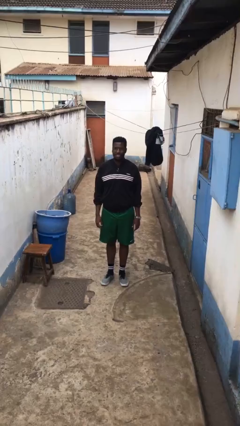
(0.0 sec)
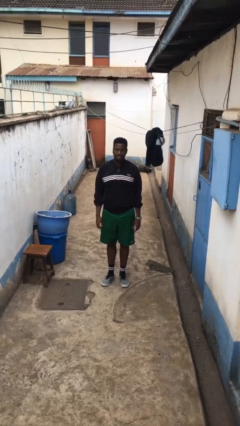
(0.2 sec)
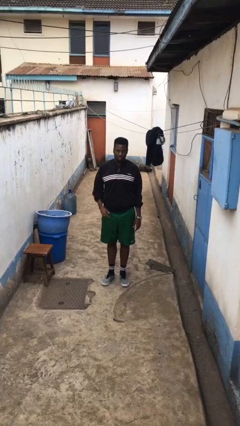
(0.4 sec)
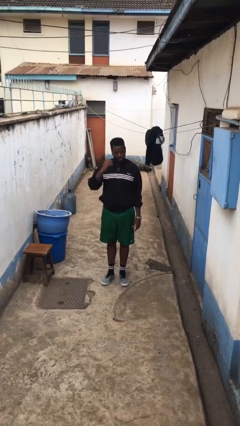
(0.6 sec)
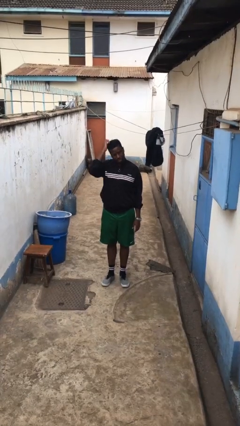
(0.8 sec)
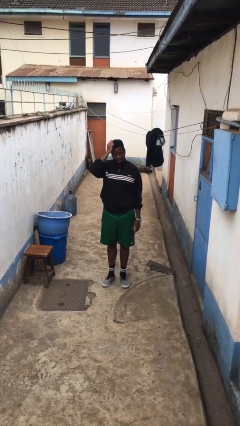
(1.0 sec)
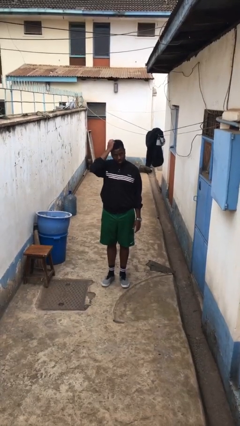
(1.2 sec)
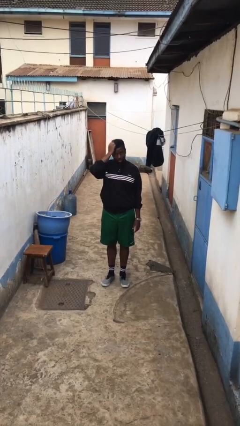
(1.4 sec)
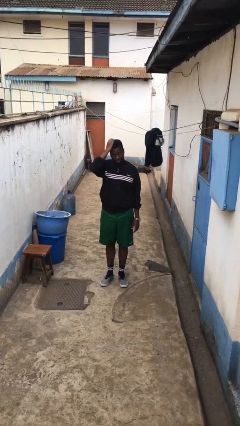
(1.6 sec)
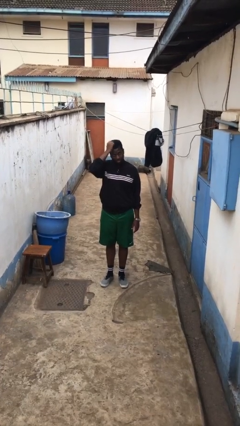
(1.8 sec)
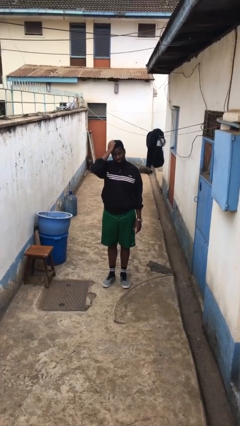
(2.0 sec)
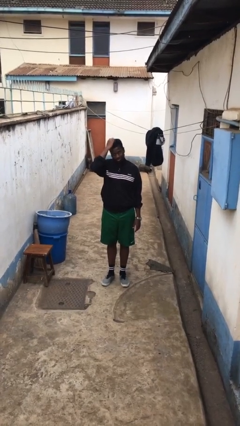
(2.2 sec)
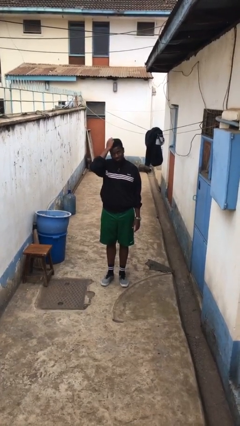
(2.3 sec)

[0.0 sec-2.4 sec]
person scratches face

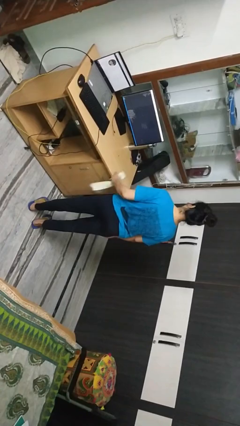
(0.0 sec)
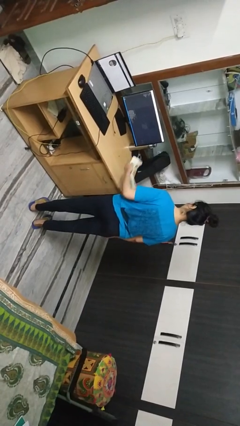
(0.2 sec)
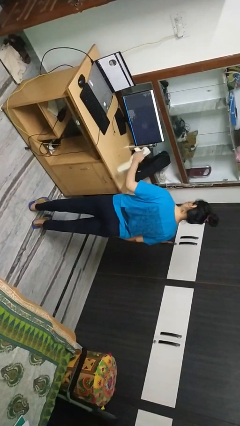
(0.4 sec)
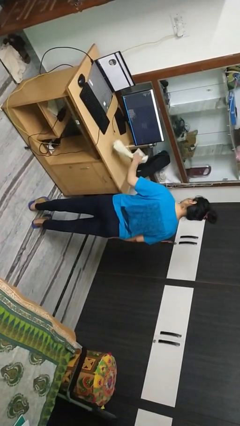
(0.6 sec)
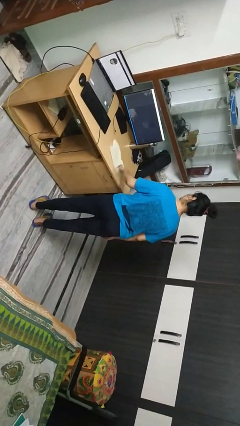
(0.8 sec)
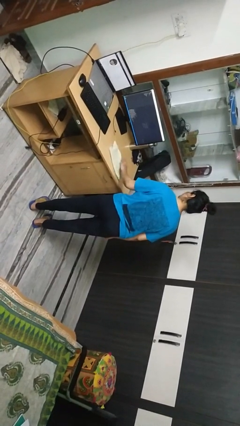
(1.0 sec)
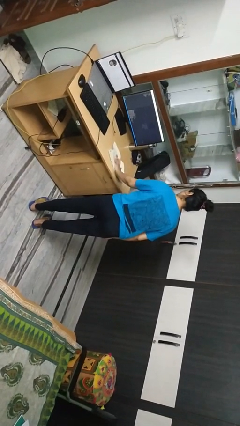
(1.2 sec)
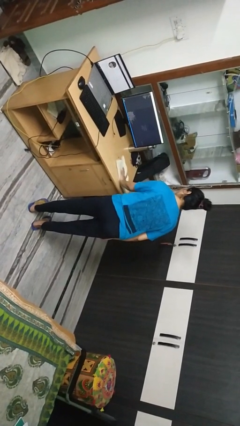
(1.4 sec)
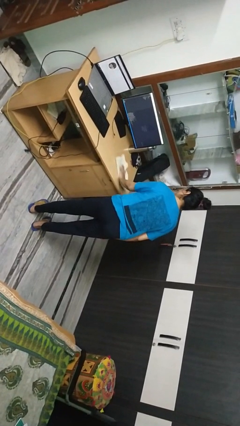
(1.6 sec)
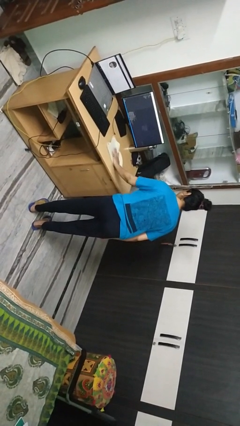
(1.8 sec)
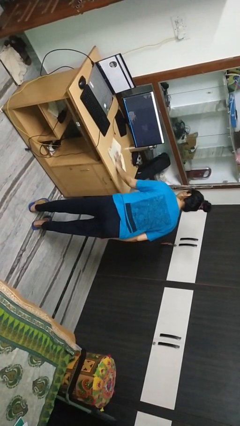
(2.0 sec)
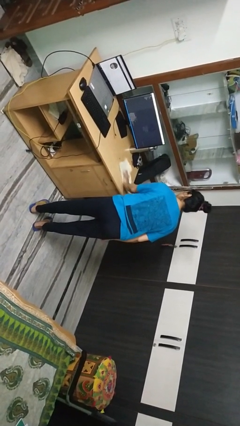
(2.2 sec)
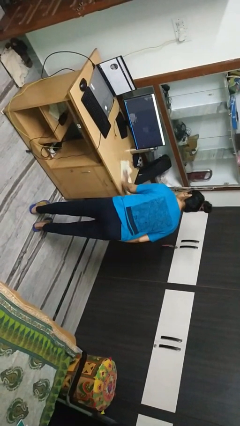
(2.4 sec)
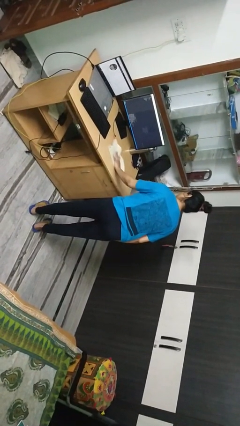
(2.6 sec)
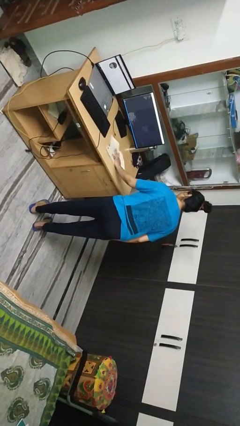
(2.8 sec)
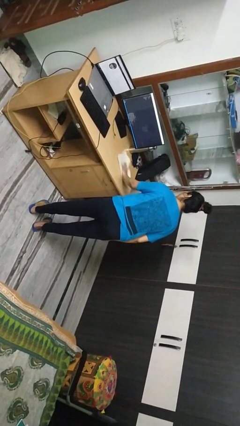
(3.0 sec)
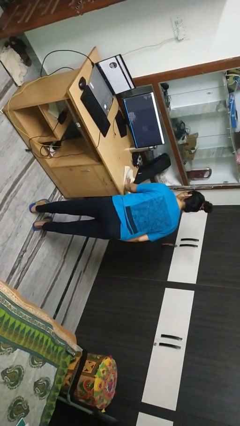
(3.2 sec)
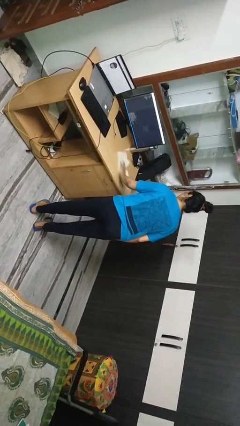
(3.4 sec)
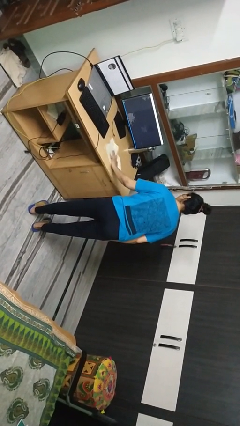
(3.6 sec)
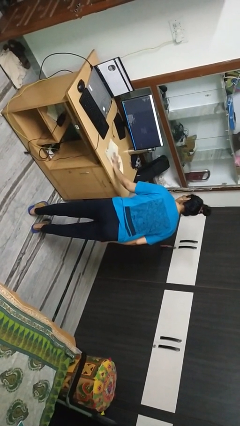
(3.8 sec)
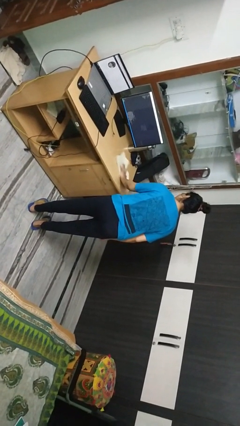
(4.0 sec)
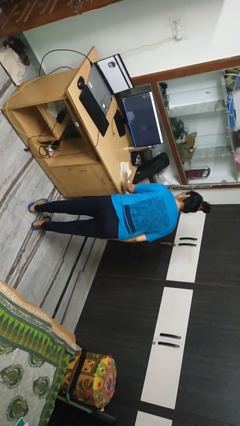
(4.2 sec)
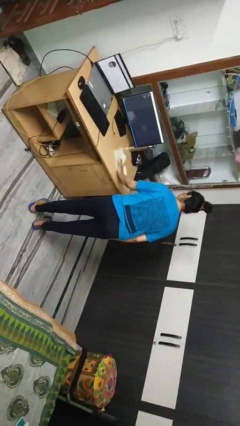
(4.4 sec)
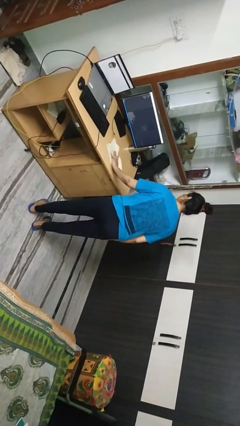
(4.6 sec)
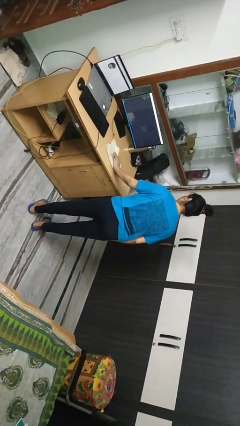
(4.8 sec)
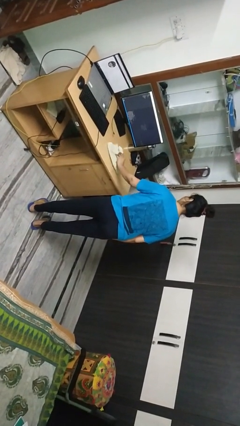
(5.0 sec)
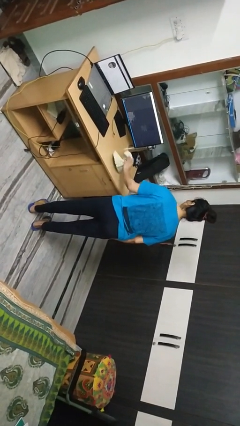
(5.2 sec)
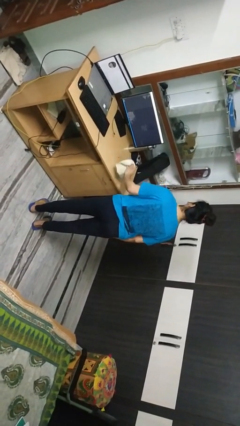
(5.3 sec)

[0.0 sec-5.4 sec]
person cleans table with rag

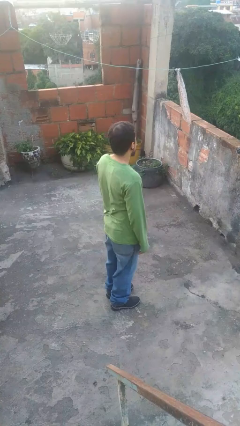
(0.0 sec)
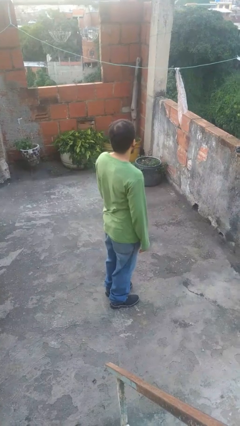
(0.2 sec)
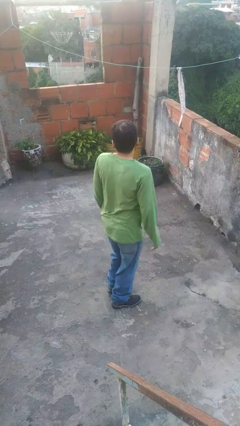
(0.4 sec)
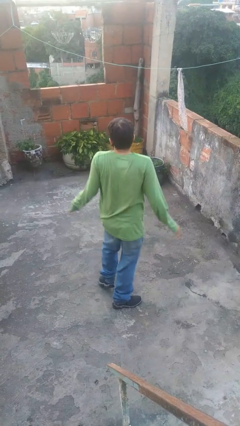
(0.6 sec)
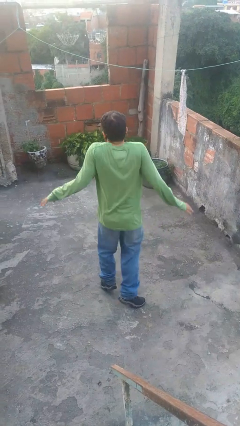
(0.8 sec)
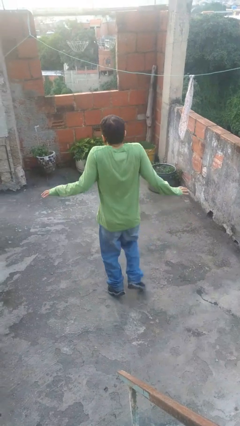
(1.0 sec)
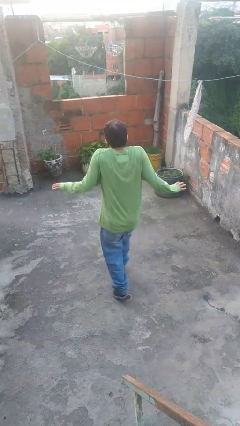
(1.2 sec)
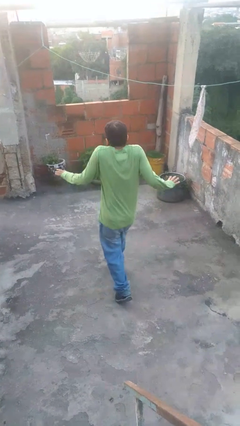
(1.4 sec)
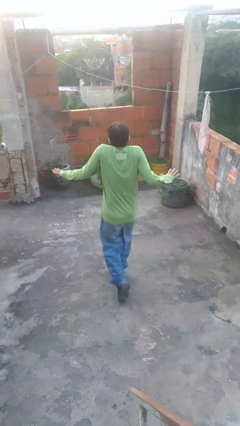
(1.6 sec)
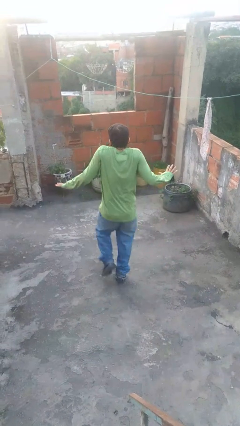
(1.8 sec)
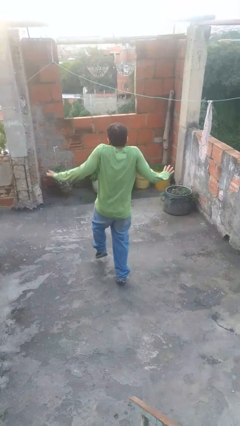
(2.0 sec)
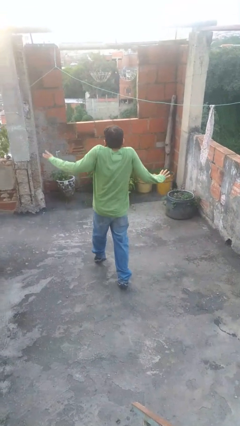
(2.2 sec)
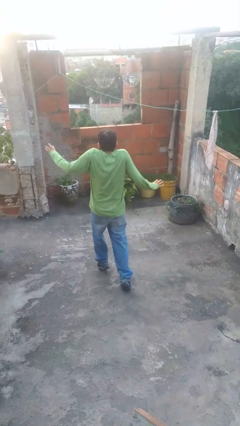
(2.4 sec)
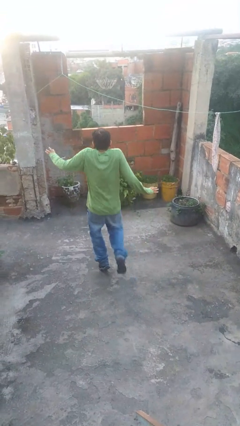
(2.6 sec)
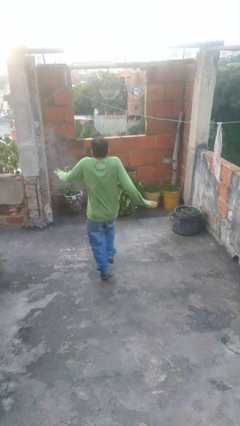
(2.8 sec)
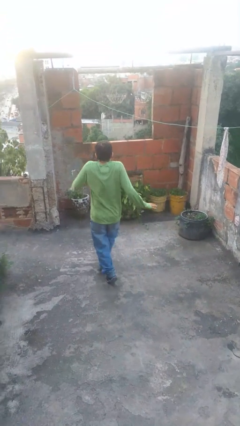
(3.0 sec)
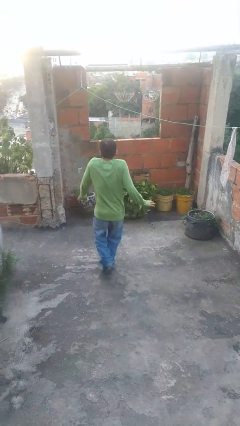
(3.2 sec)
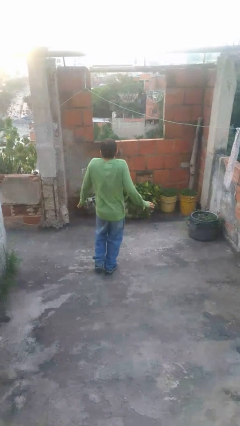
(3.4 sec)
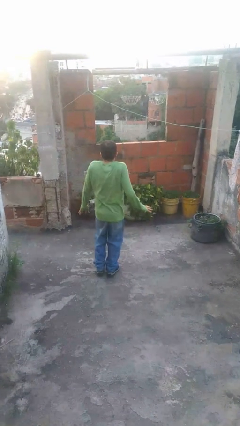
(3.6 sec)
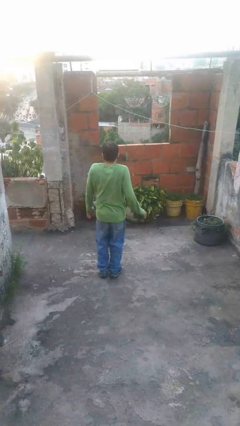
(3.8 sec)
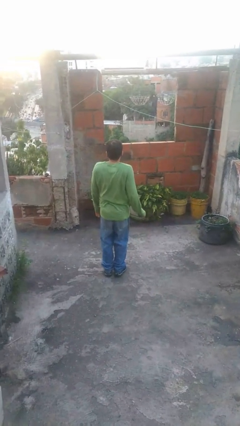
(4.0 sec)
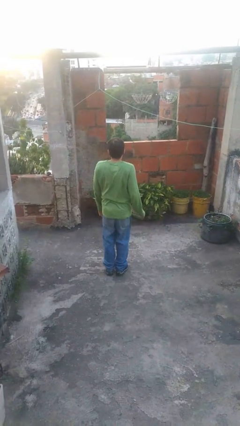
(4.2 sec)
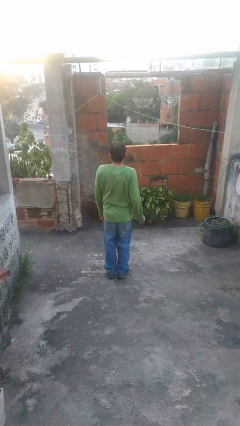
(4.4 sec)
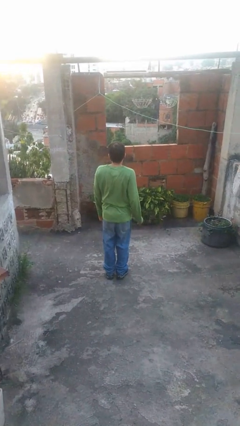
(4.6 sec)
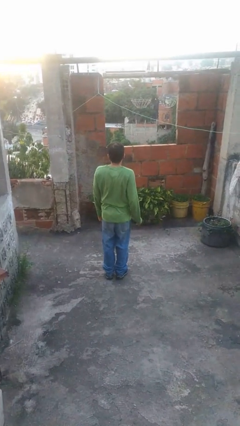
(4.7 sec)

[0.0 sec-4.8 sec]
person walks tiptoe

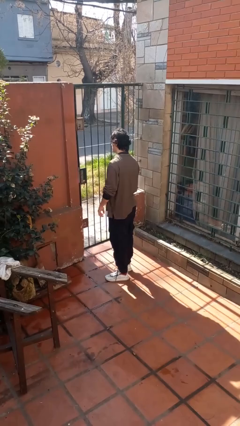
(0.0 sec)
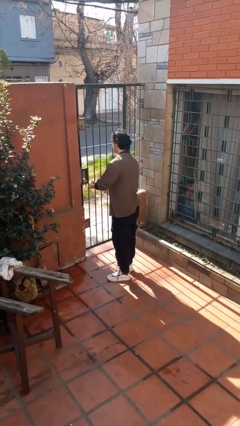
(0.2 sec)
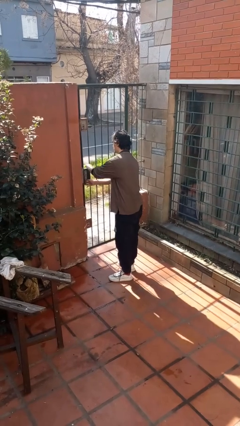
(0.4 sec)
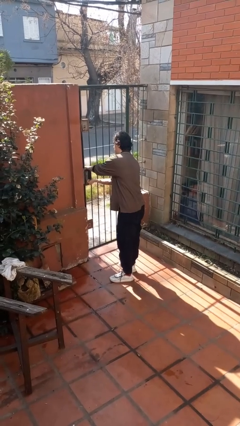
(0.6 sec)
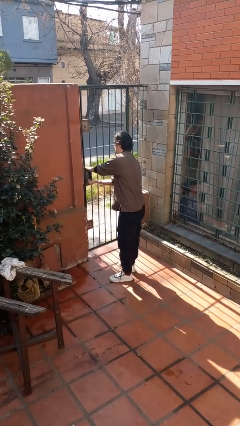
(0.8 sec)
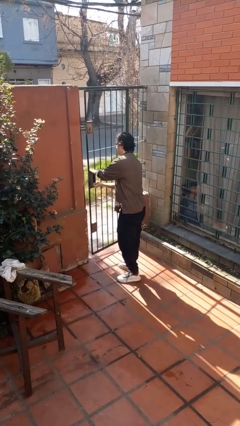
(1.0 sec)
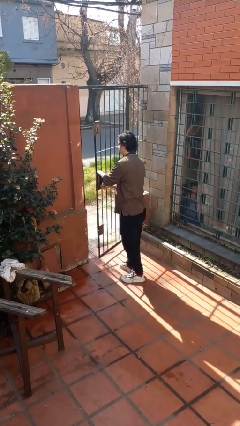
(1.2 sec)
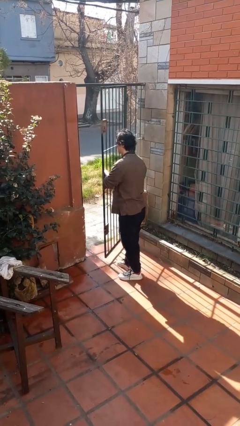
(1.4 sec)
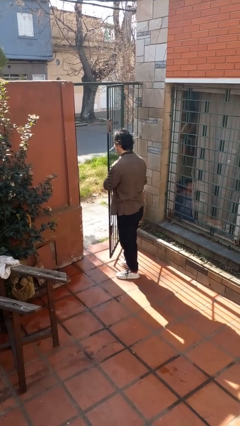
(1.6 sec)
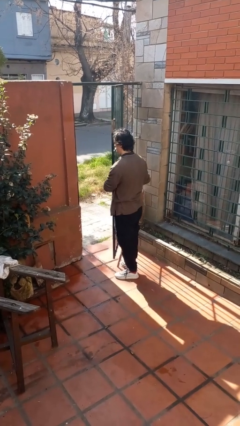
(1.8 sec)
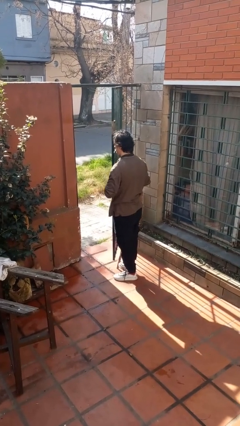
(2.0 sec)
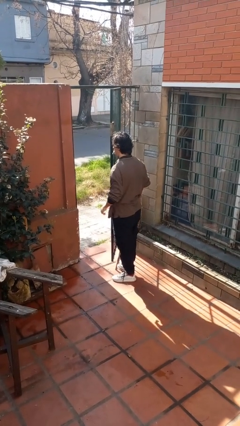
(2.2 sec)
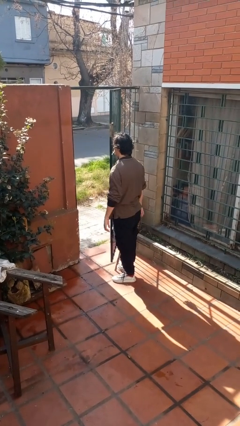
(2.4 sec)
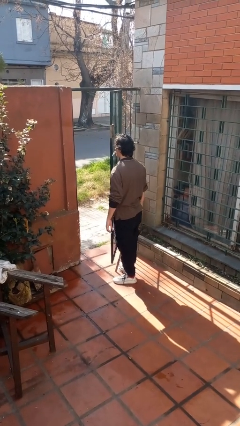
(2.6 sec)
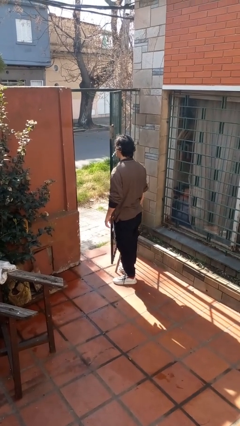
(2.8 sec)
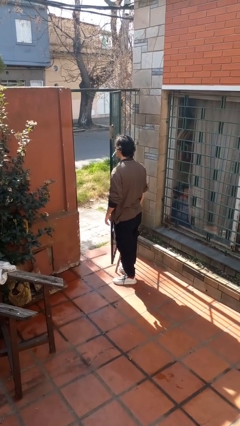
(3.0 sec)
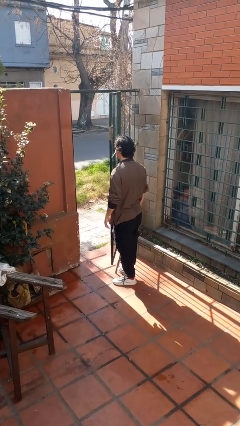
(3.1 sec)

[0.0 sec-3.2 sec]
person opens gate

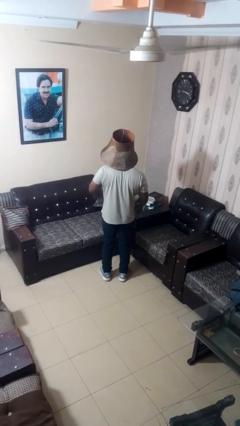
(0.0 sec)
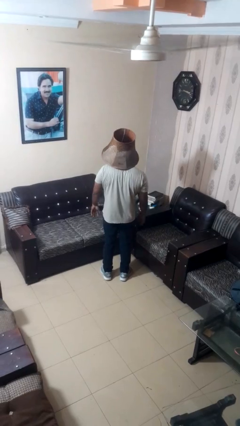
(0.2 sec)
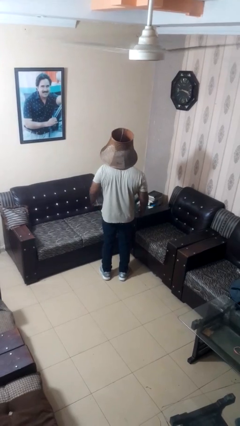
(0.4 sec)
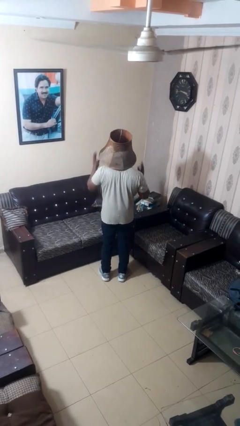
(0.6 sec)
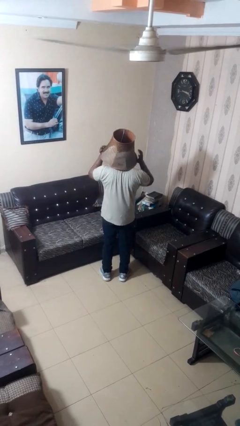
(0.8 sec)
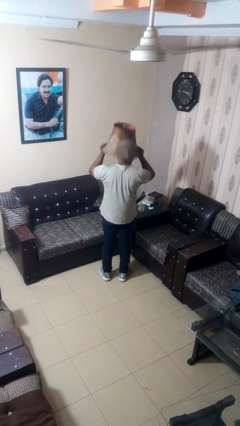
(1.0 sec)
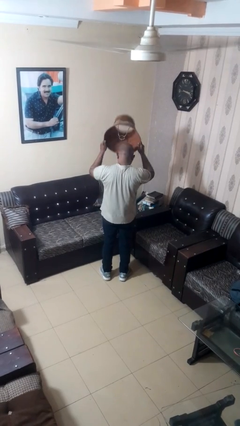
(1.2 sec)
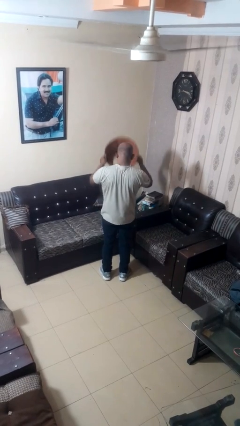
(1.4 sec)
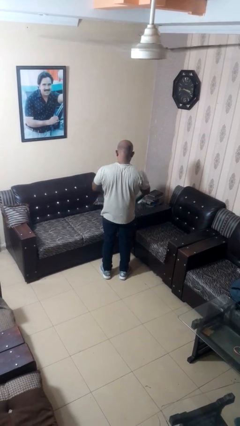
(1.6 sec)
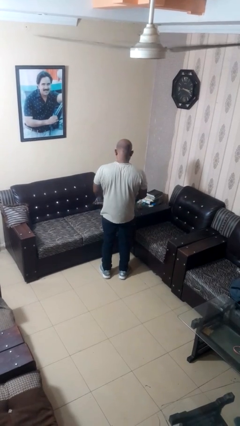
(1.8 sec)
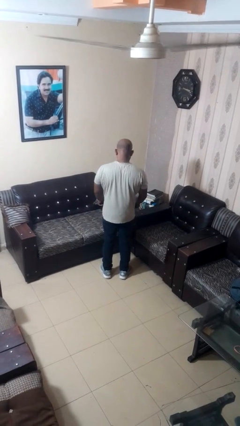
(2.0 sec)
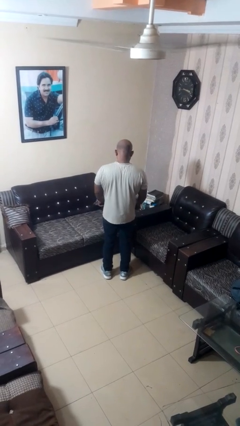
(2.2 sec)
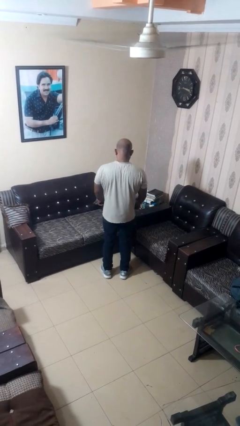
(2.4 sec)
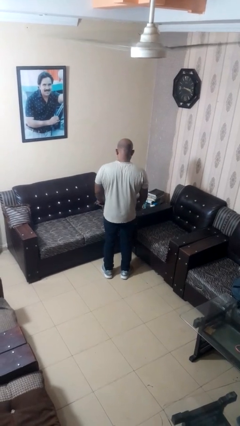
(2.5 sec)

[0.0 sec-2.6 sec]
person takes off hat
